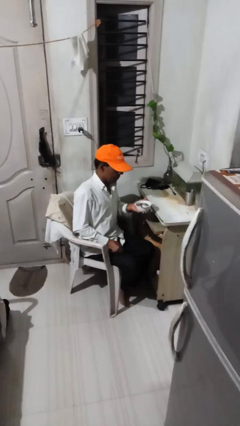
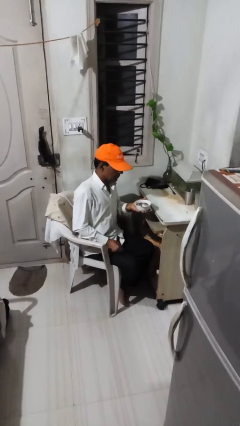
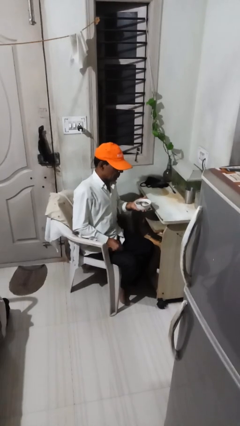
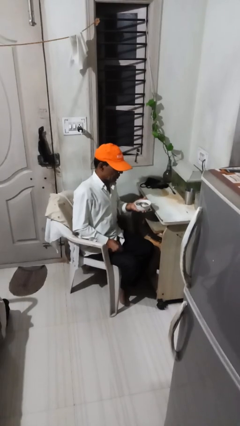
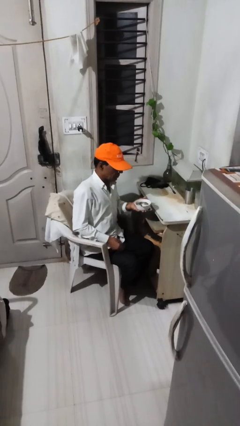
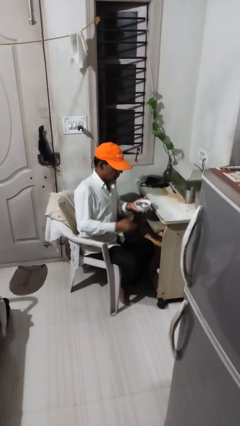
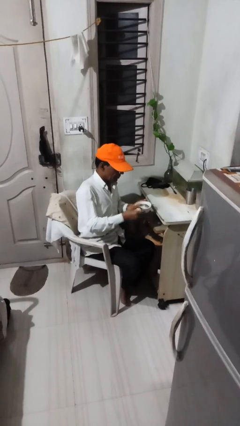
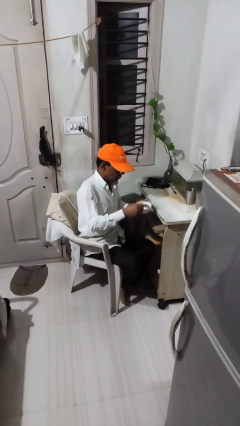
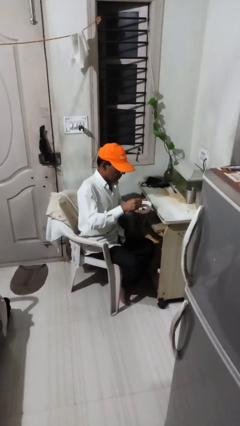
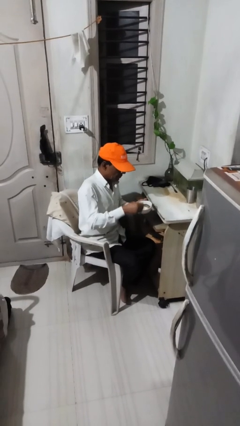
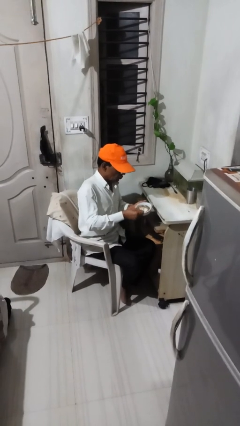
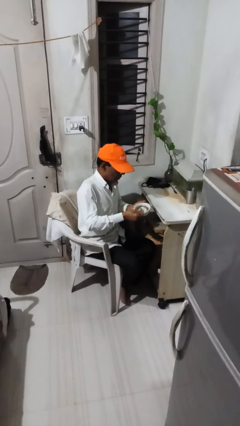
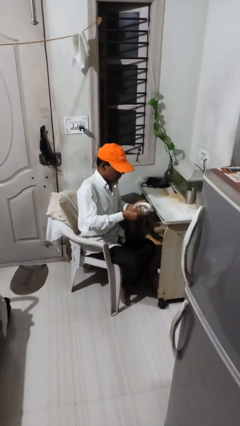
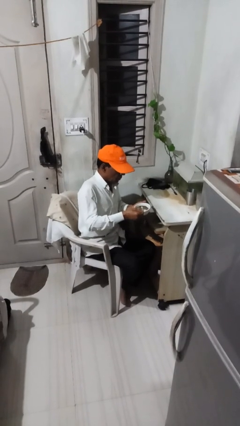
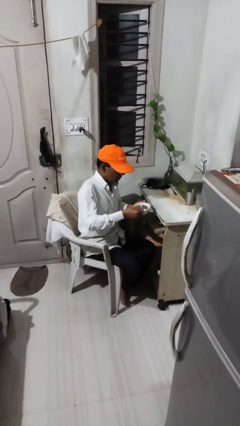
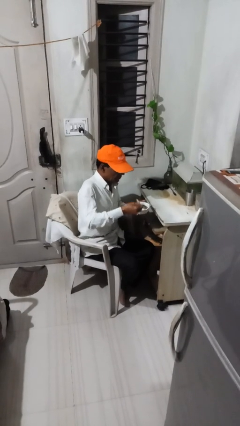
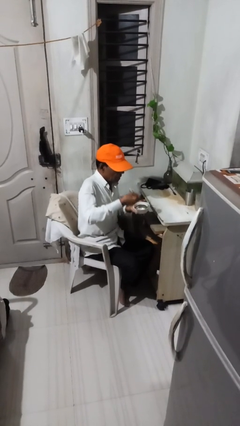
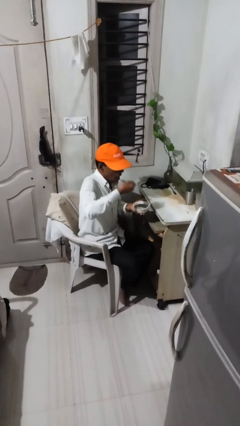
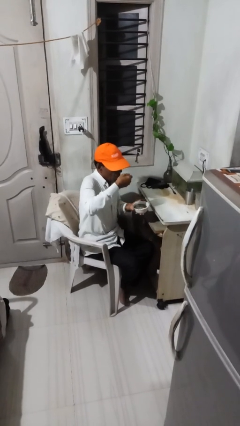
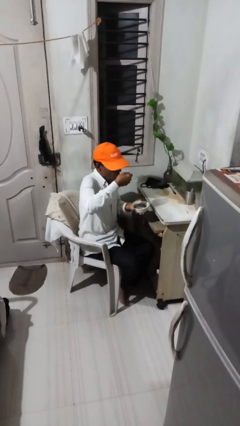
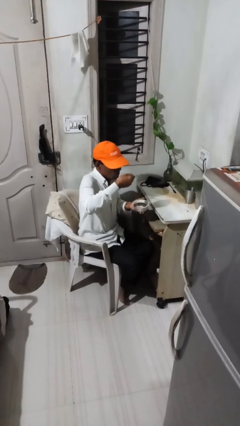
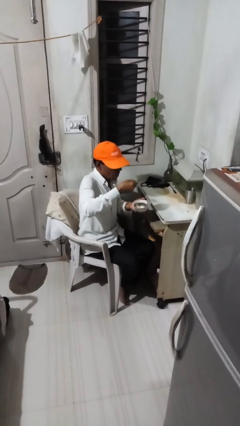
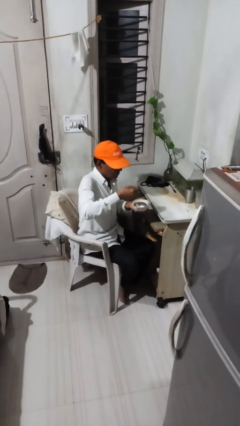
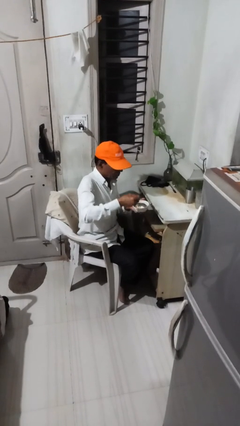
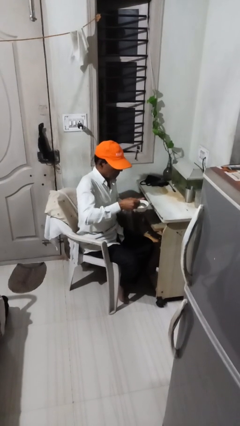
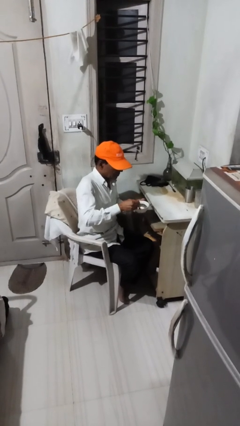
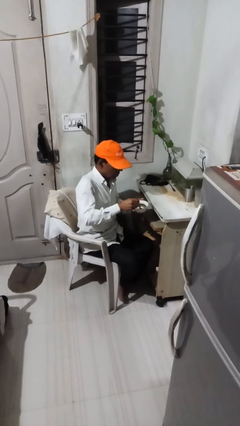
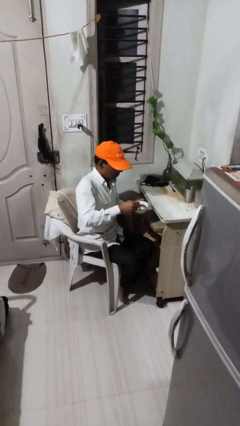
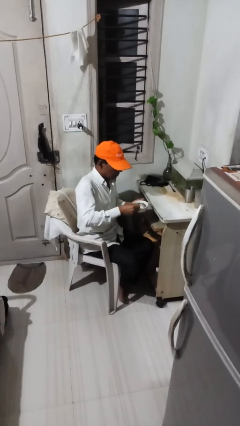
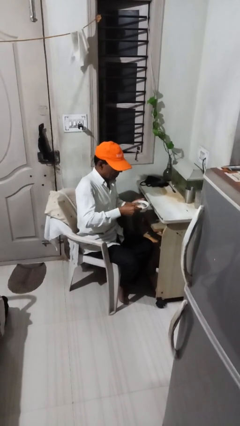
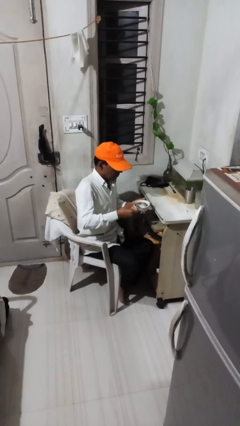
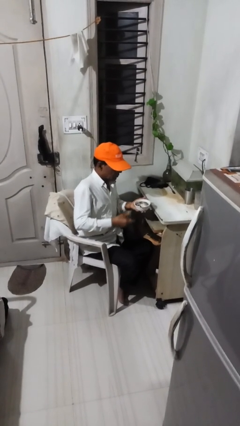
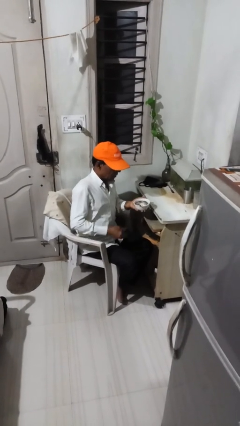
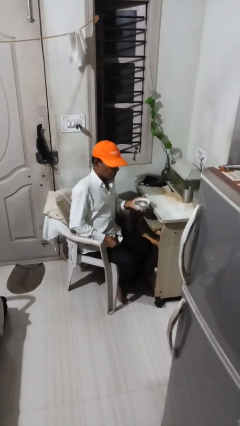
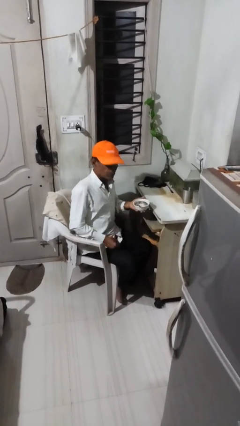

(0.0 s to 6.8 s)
person eats with utensil

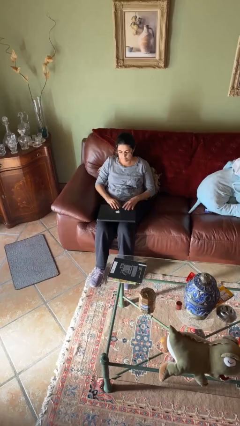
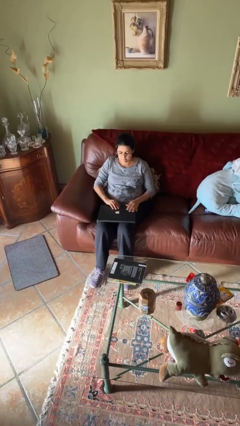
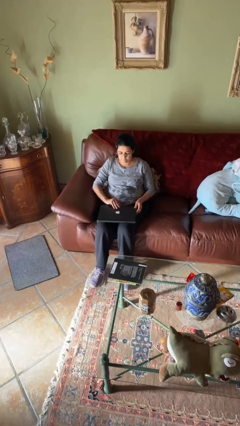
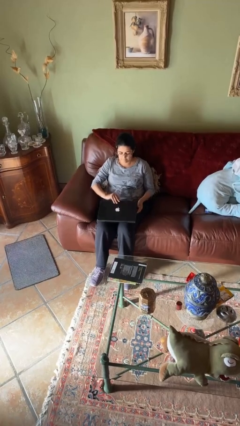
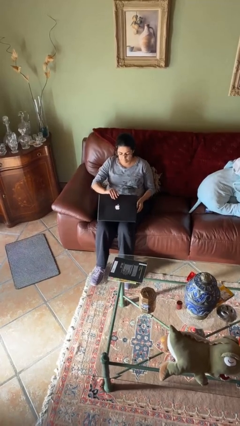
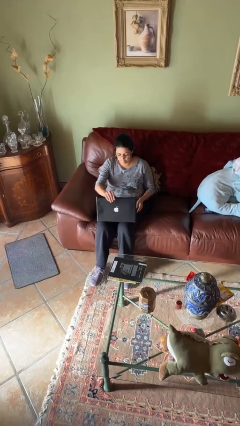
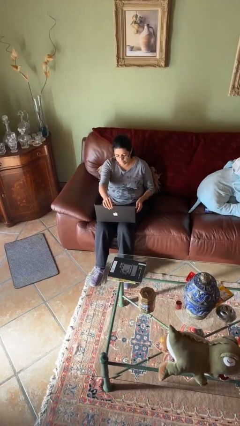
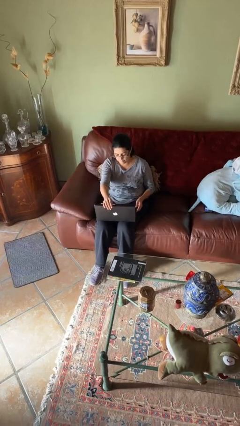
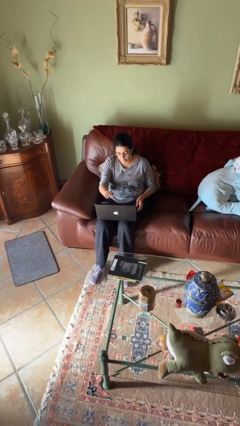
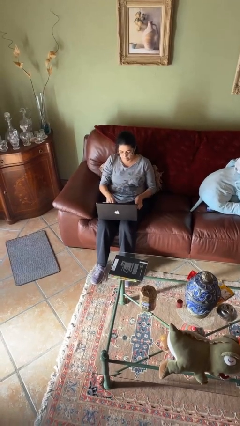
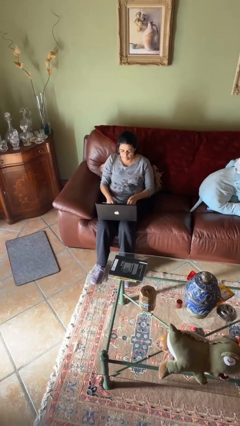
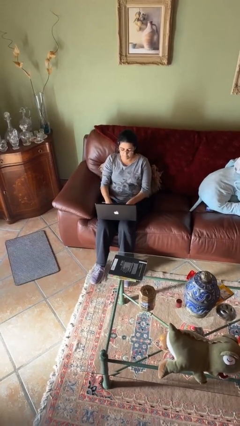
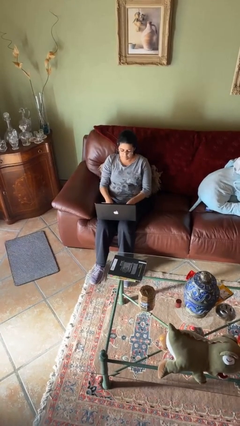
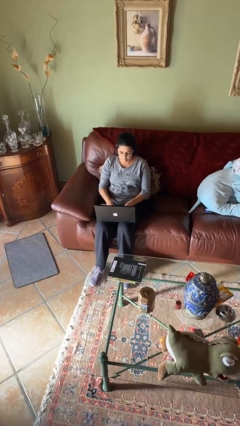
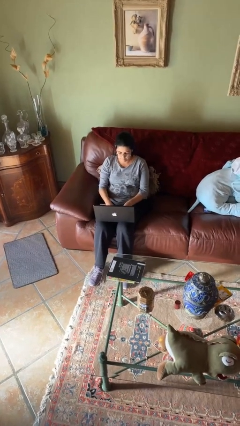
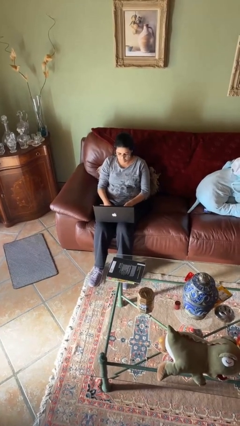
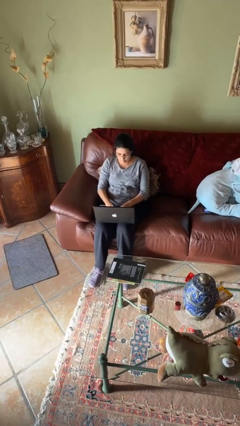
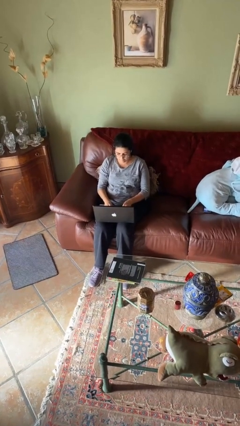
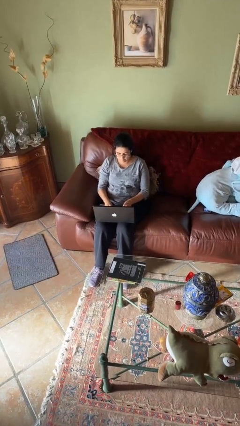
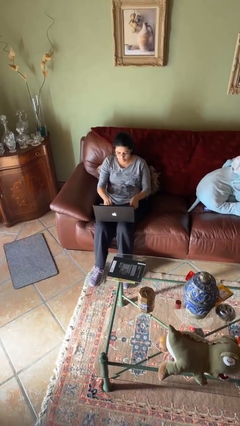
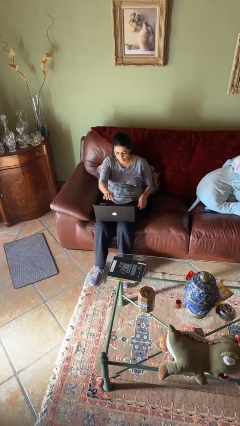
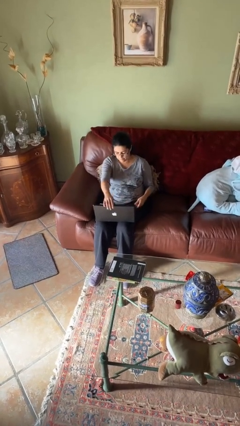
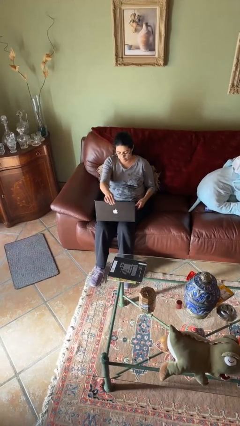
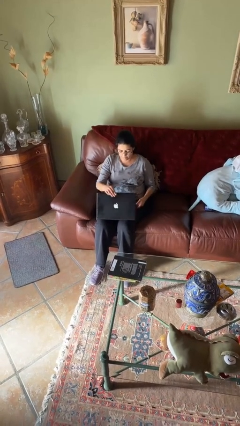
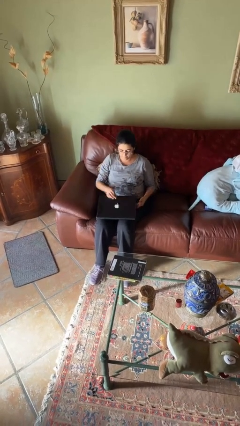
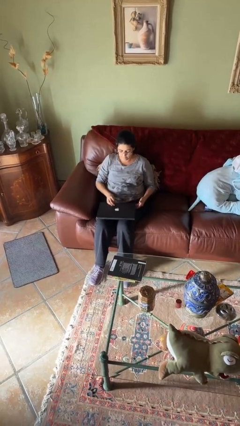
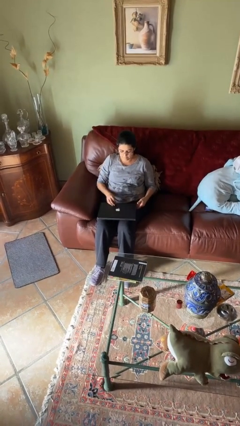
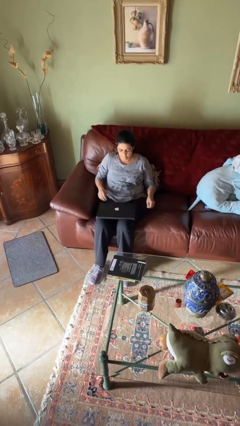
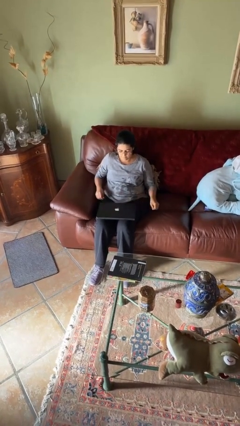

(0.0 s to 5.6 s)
person interacts with laptop

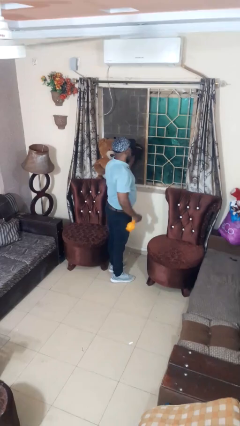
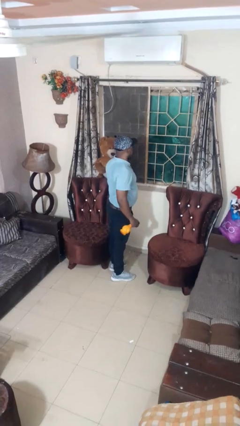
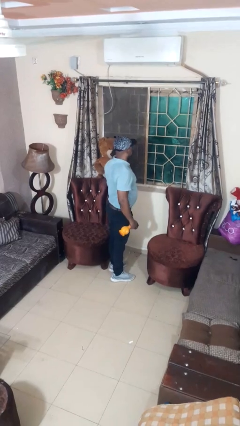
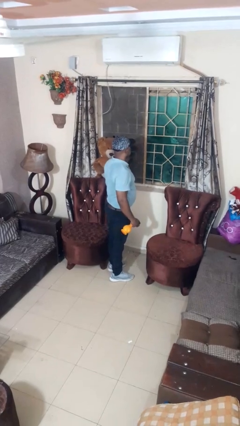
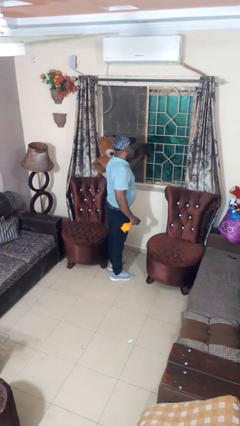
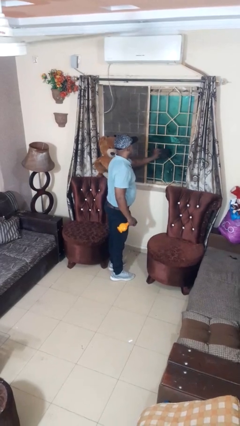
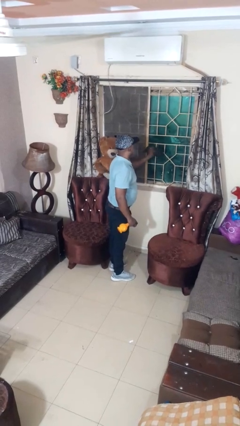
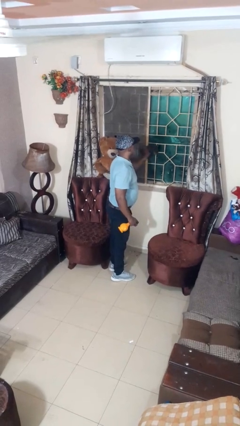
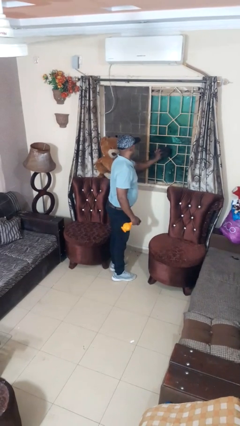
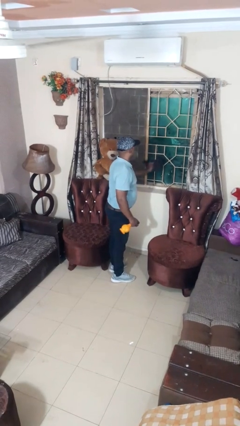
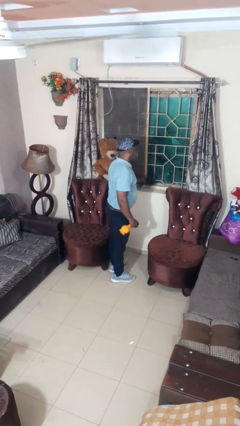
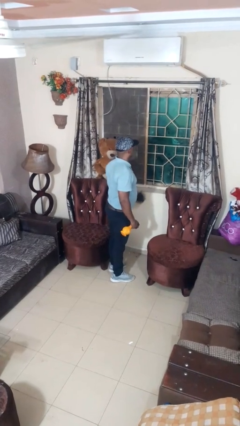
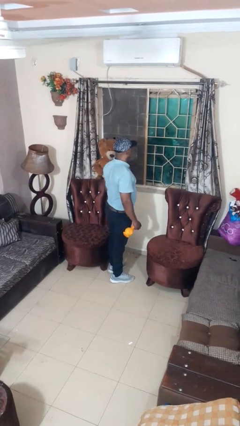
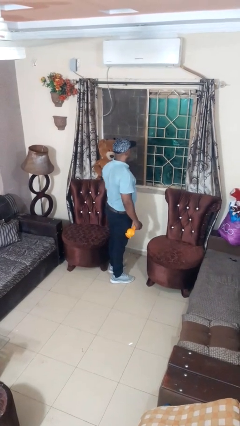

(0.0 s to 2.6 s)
person washes window

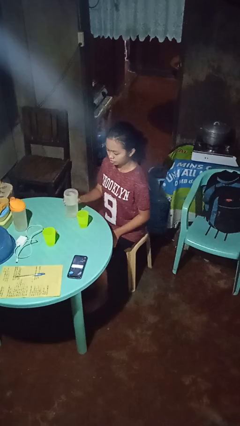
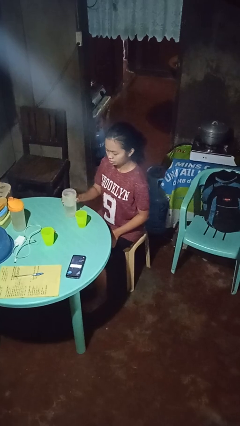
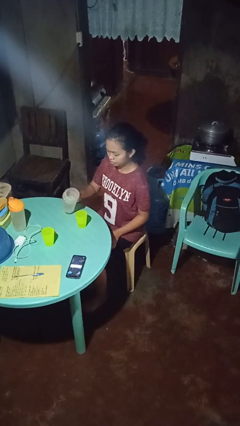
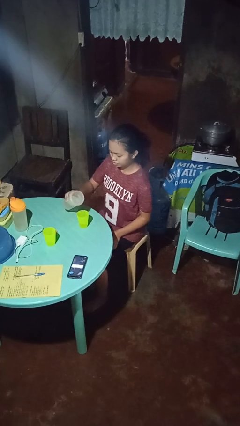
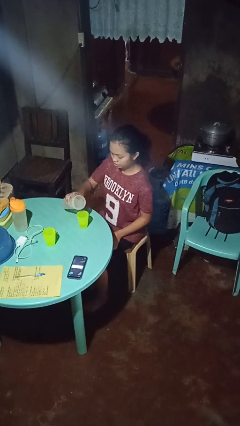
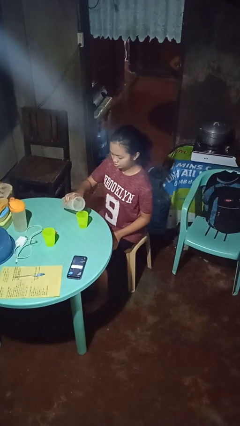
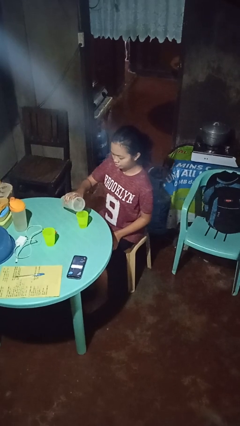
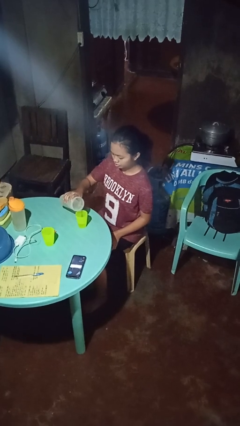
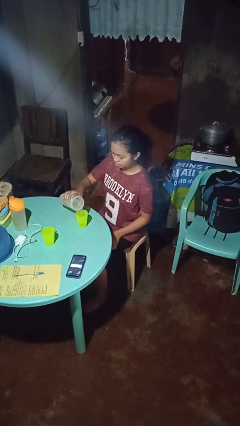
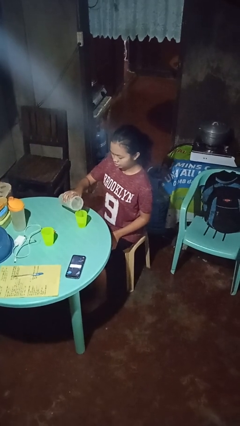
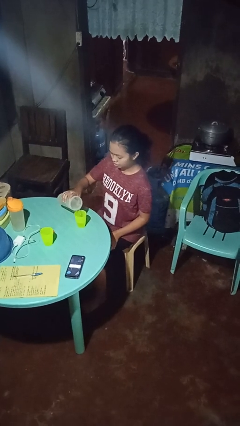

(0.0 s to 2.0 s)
person pours liquid into cup

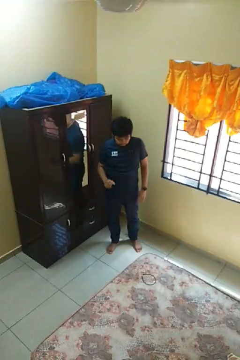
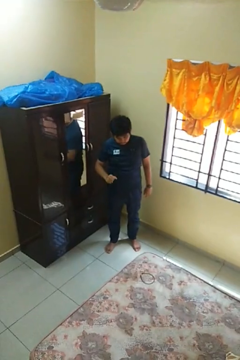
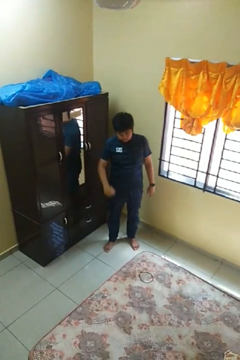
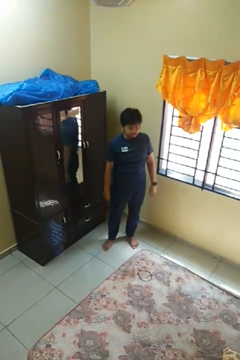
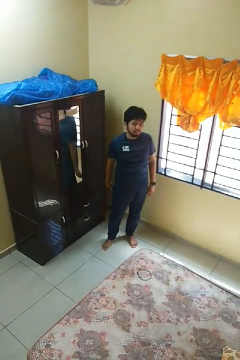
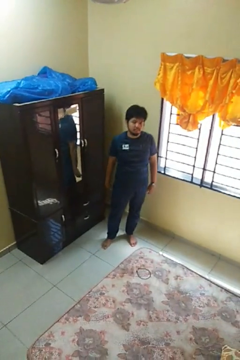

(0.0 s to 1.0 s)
person gestures lower hand
